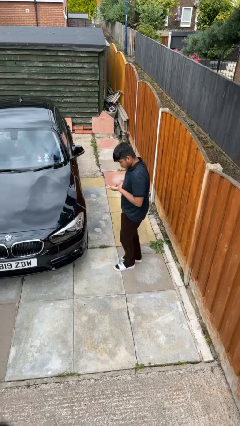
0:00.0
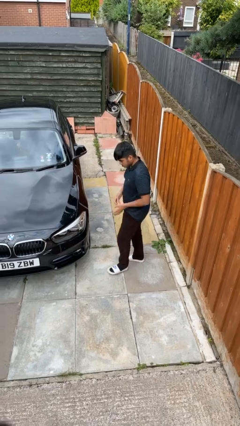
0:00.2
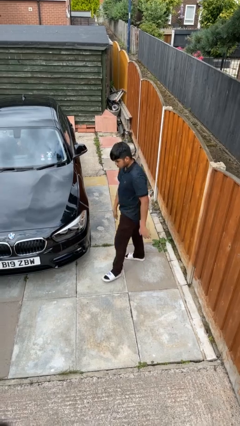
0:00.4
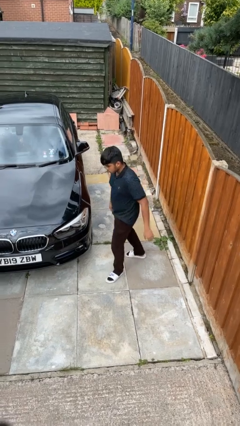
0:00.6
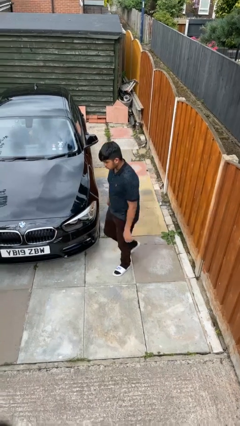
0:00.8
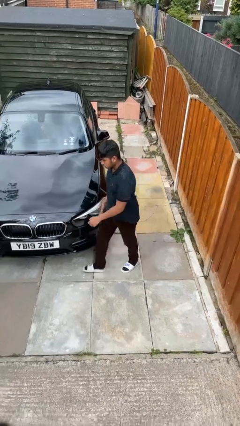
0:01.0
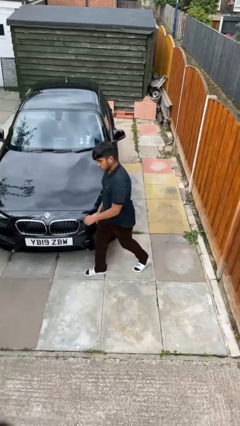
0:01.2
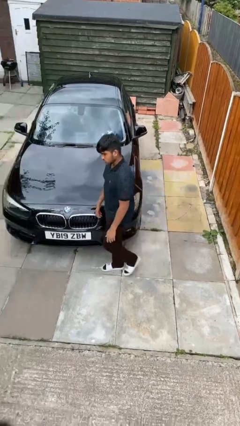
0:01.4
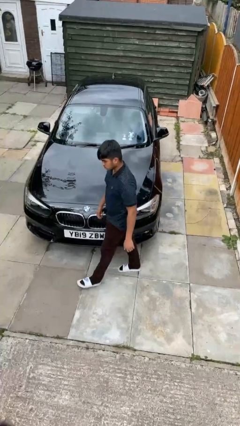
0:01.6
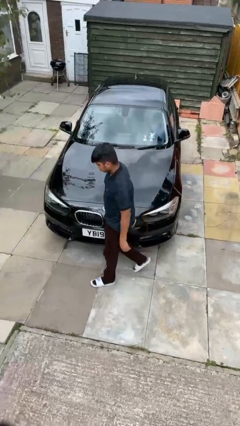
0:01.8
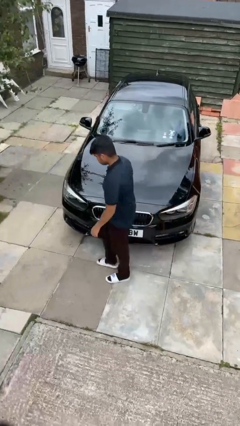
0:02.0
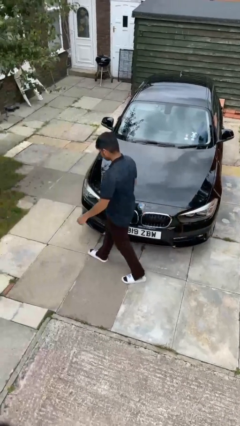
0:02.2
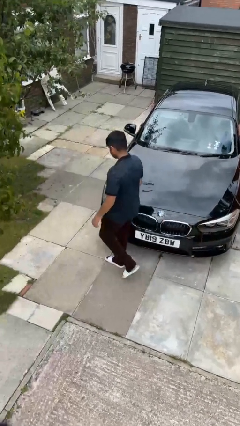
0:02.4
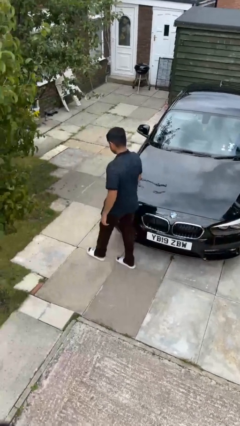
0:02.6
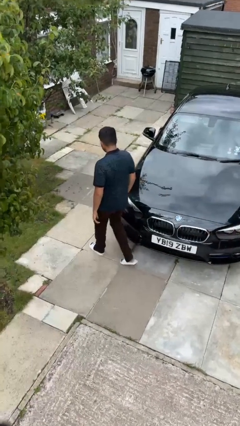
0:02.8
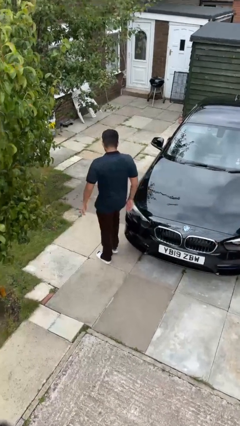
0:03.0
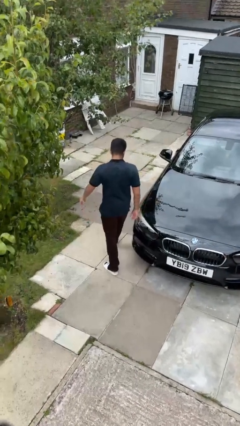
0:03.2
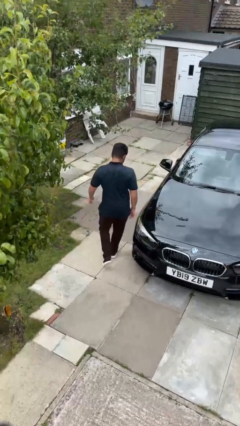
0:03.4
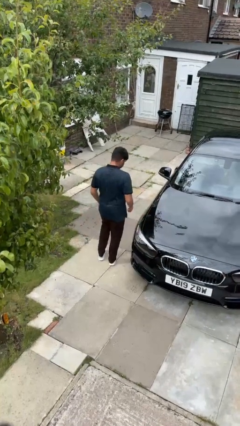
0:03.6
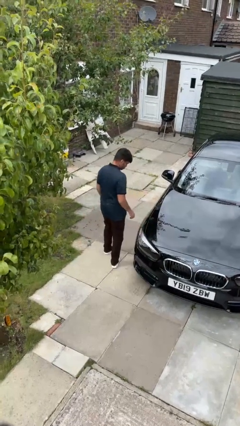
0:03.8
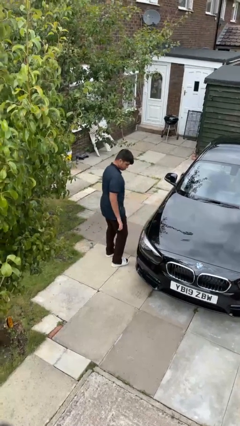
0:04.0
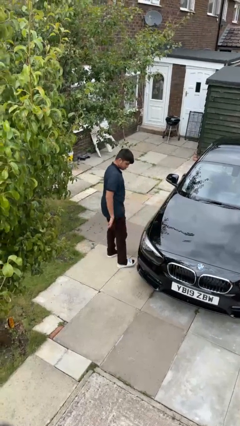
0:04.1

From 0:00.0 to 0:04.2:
person walks around car

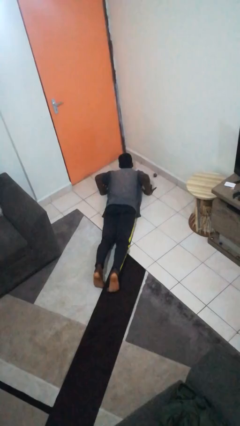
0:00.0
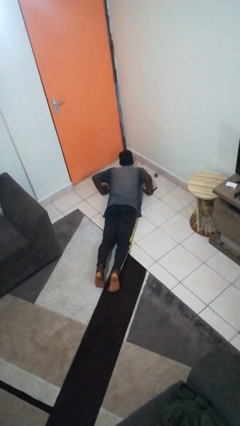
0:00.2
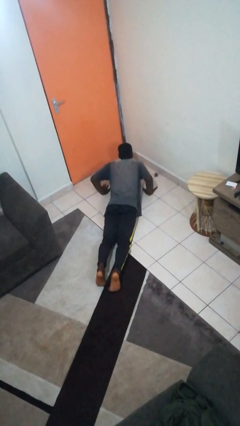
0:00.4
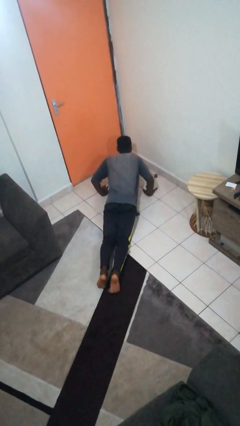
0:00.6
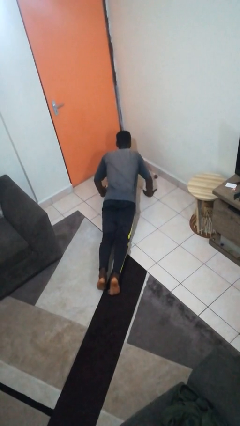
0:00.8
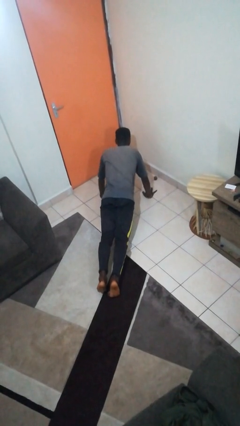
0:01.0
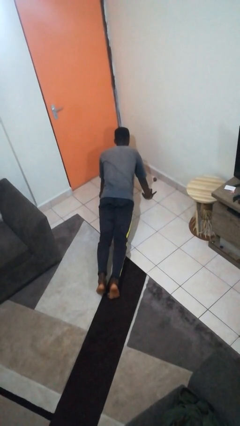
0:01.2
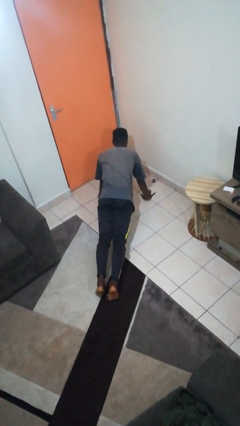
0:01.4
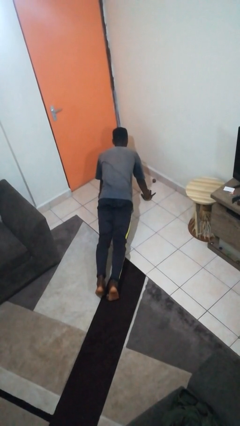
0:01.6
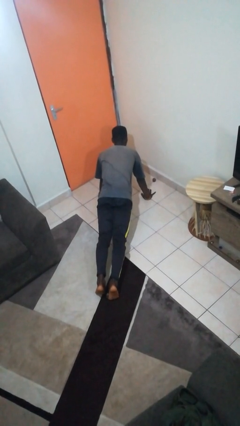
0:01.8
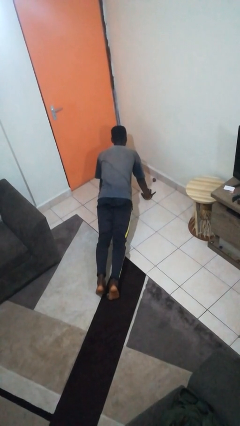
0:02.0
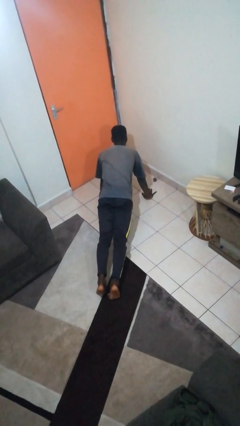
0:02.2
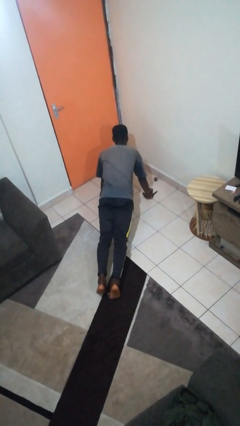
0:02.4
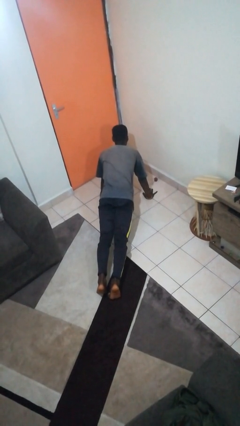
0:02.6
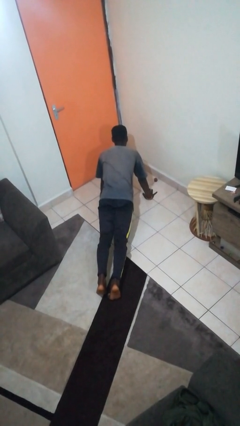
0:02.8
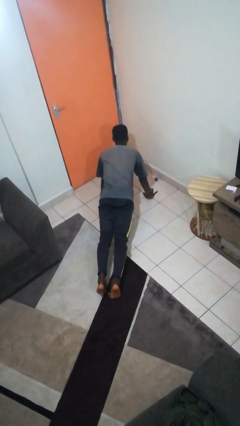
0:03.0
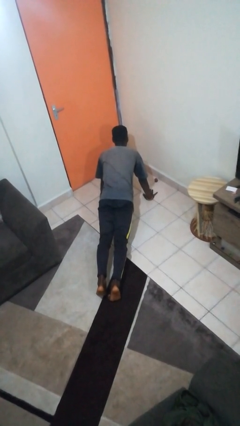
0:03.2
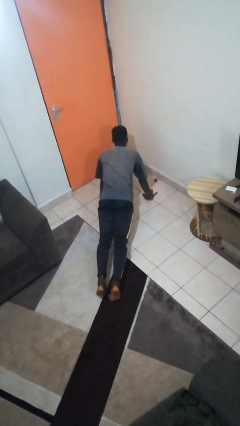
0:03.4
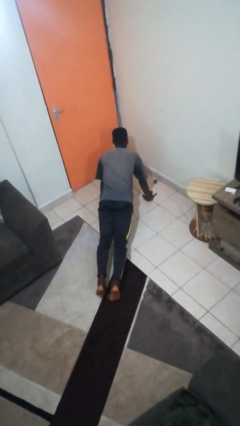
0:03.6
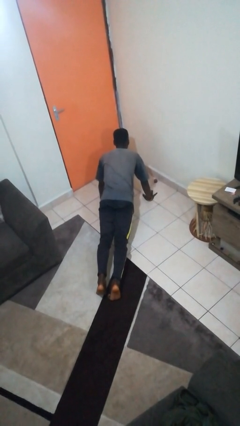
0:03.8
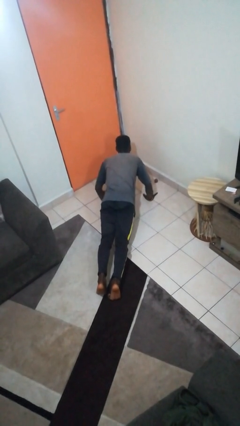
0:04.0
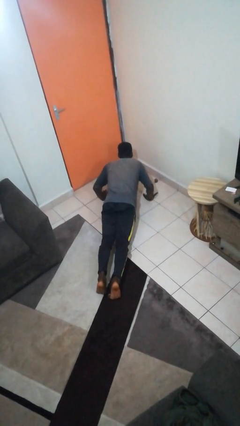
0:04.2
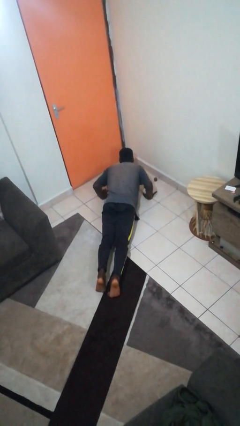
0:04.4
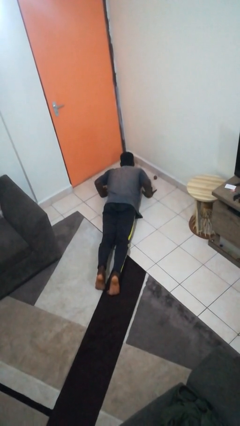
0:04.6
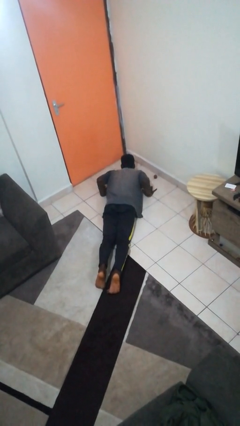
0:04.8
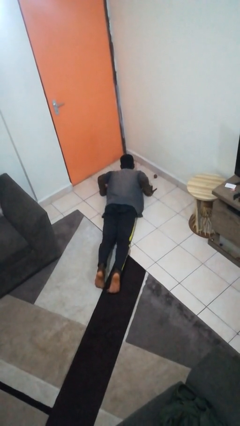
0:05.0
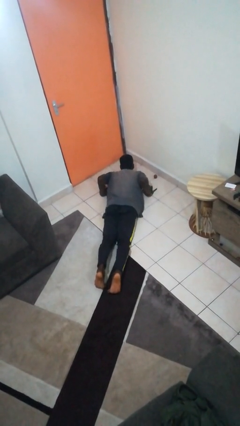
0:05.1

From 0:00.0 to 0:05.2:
person exercises with pushup

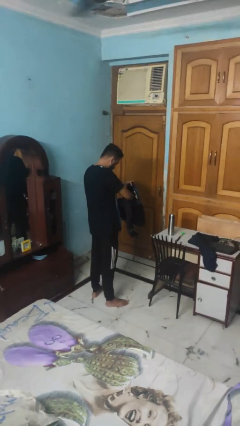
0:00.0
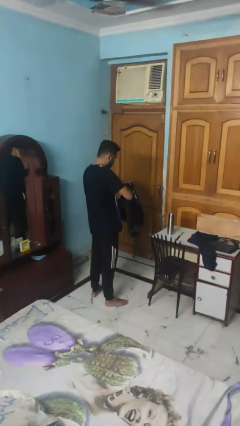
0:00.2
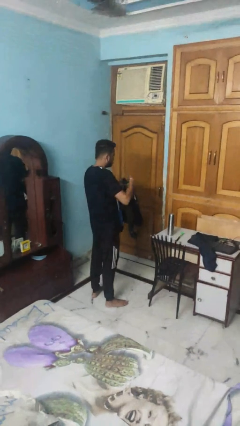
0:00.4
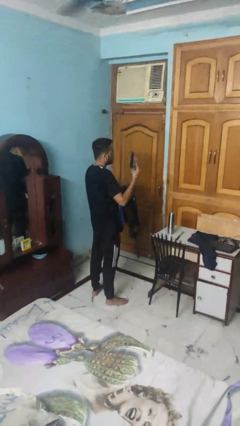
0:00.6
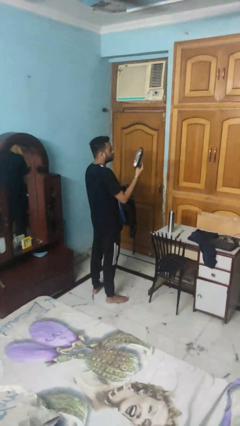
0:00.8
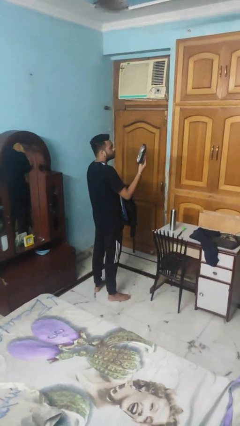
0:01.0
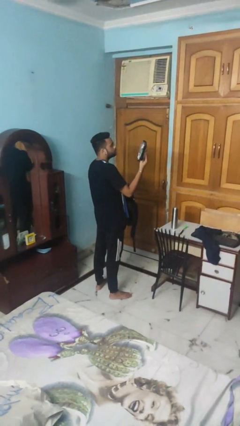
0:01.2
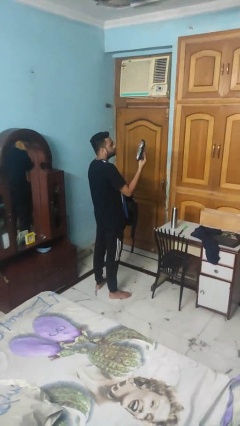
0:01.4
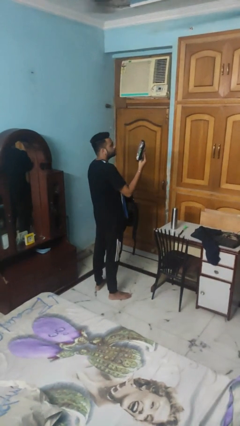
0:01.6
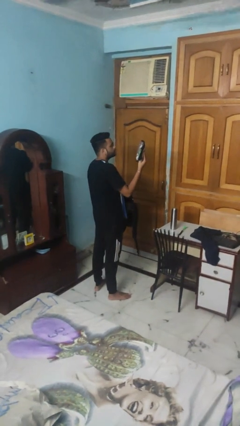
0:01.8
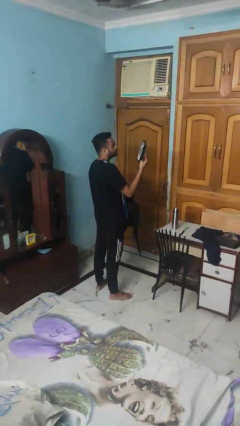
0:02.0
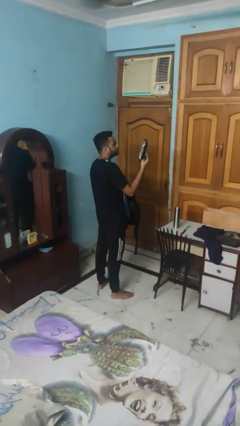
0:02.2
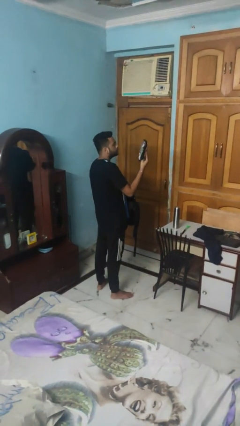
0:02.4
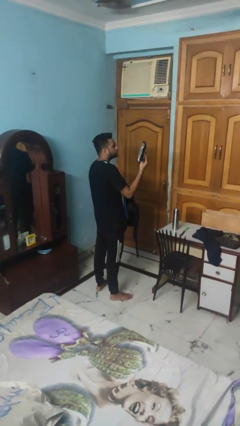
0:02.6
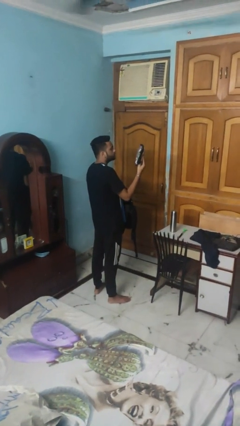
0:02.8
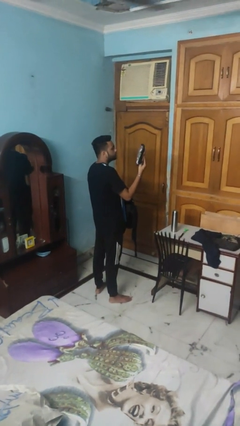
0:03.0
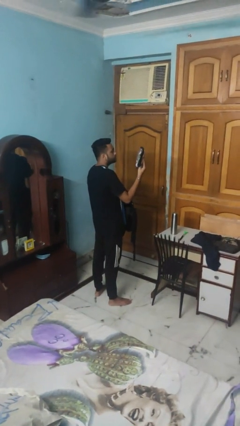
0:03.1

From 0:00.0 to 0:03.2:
person takes object from backpack

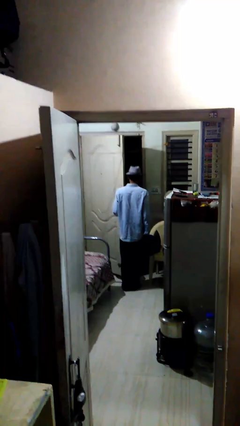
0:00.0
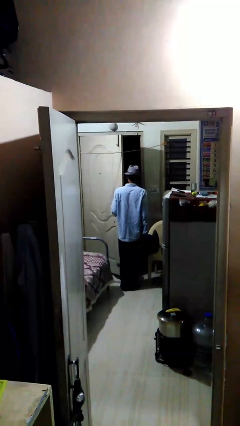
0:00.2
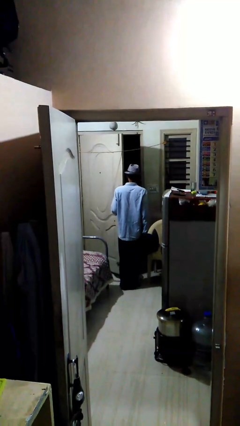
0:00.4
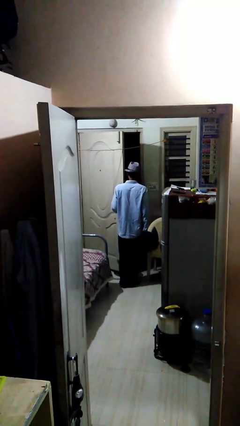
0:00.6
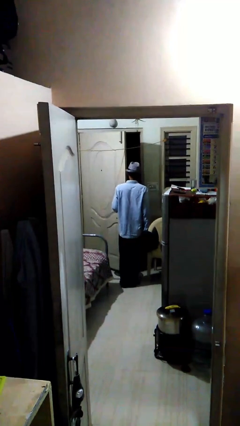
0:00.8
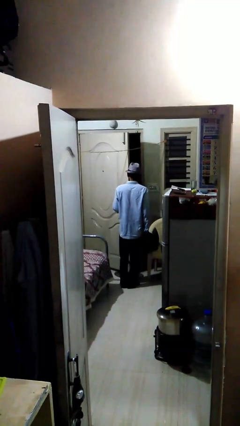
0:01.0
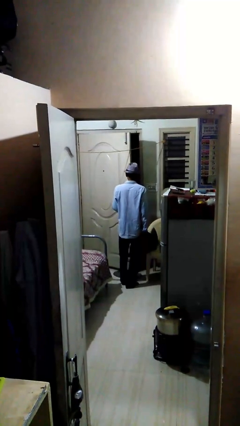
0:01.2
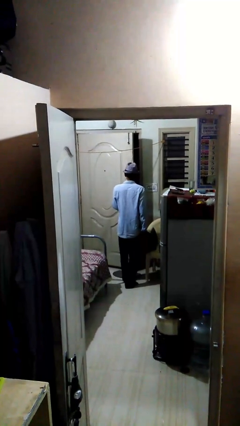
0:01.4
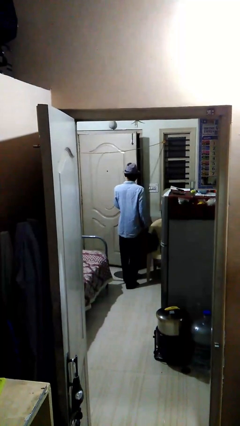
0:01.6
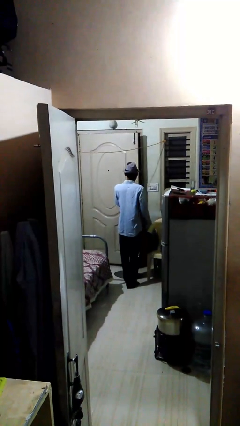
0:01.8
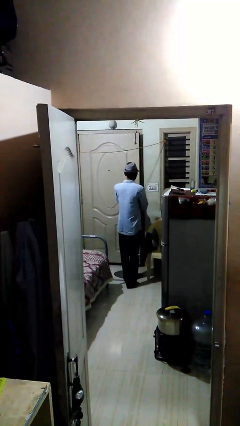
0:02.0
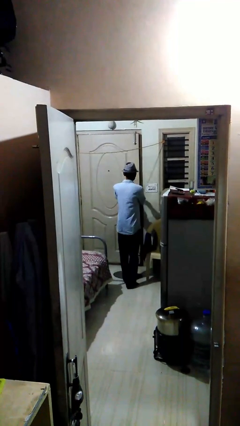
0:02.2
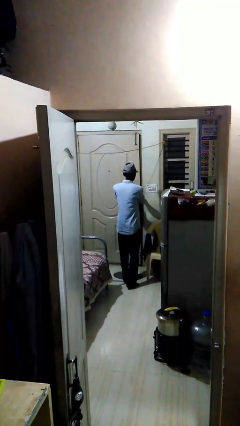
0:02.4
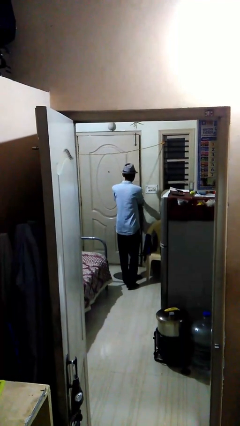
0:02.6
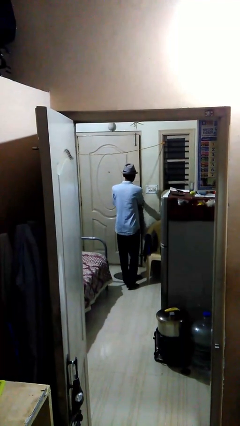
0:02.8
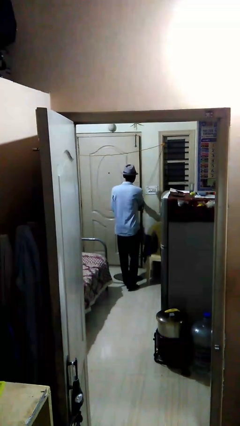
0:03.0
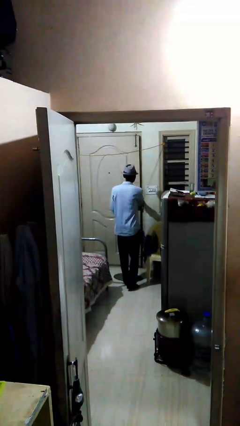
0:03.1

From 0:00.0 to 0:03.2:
person closes facility door

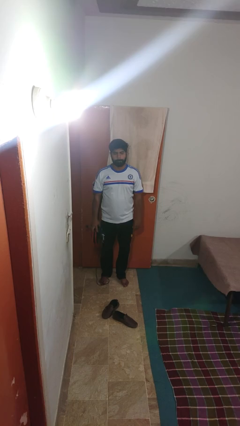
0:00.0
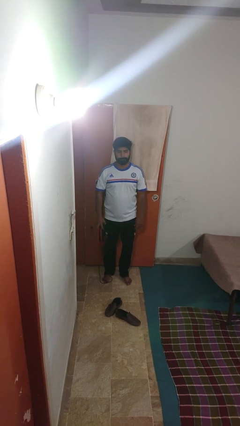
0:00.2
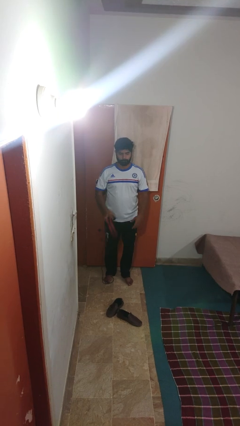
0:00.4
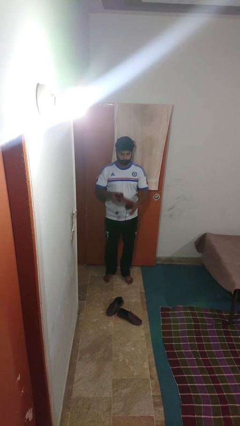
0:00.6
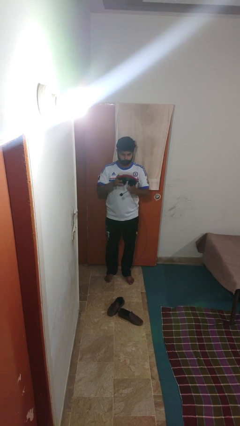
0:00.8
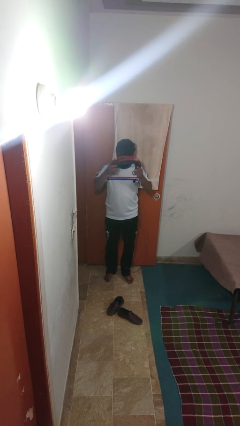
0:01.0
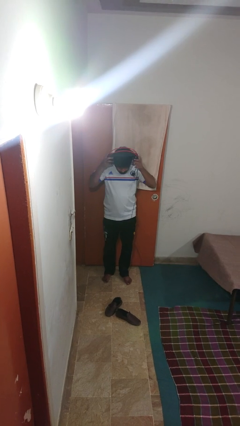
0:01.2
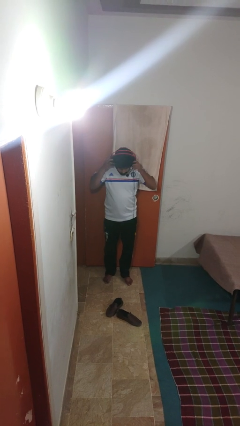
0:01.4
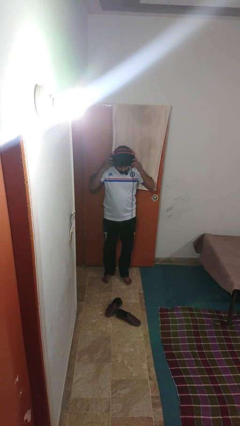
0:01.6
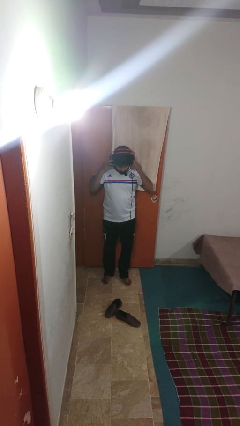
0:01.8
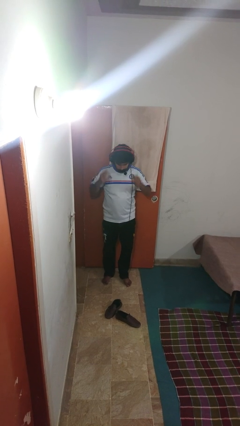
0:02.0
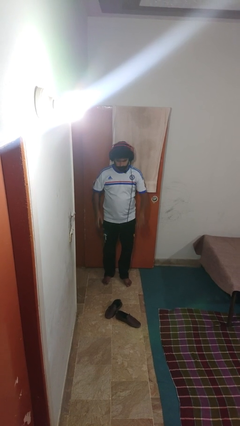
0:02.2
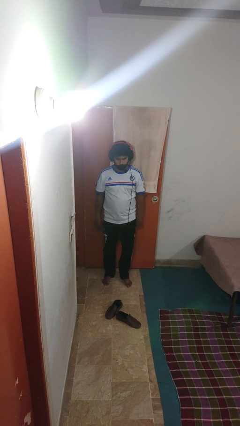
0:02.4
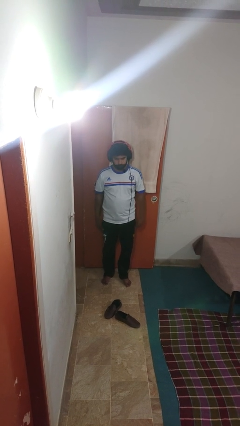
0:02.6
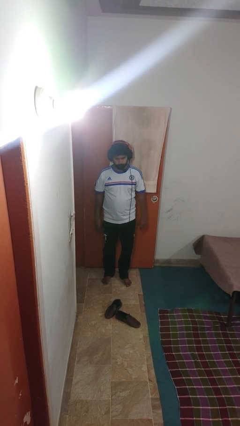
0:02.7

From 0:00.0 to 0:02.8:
person puts on headphones
